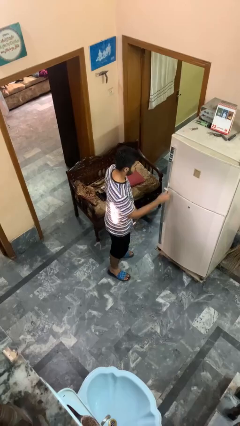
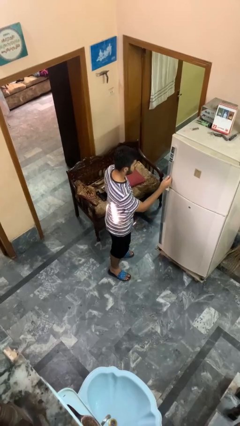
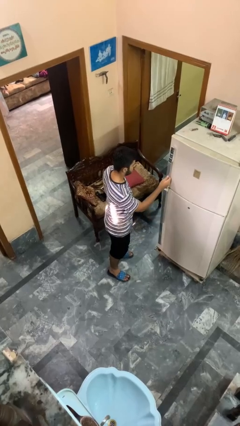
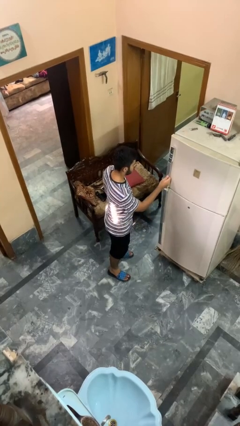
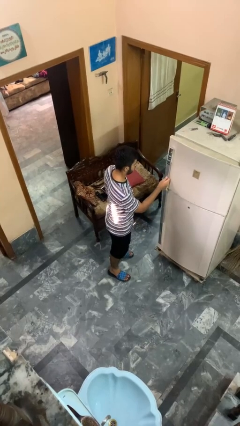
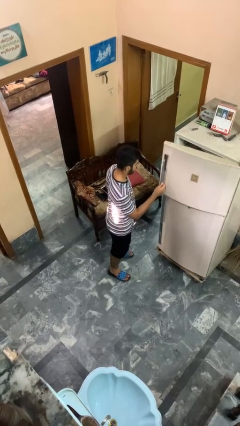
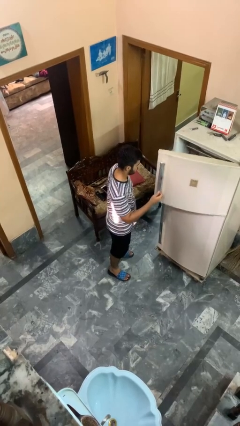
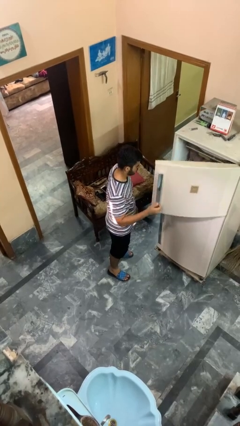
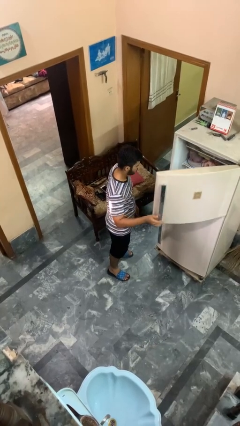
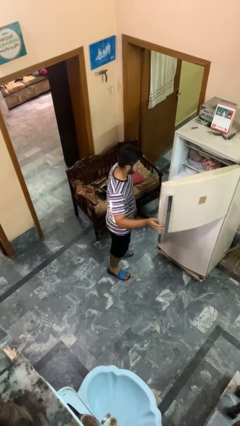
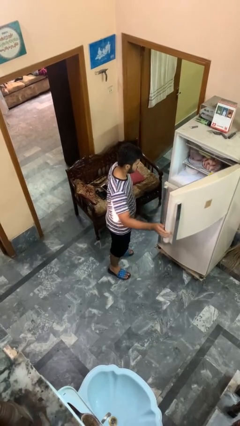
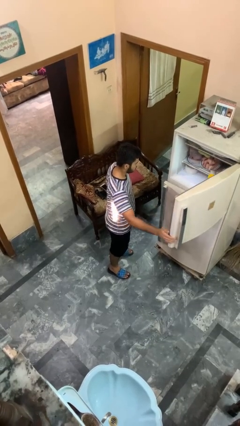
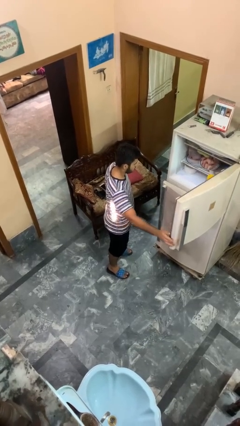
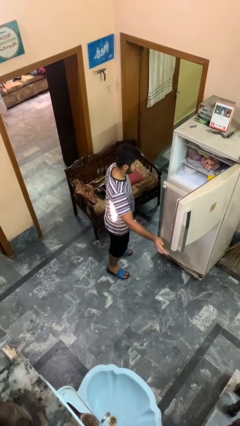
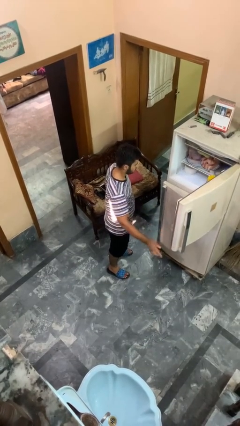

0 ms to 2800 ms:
person opens refrigerator

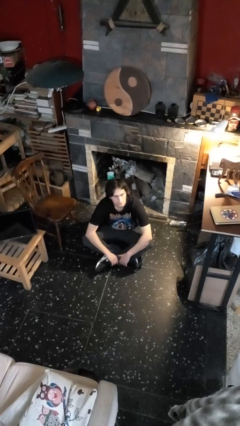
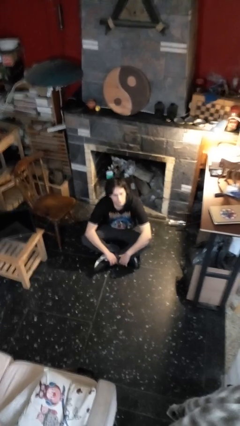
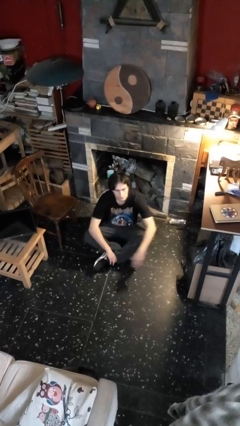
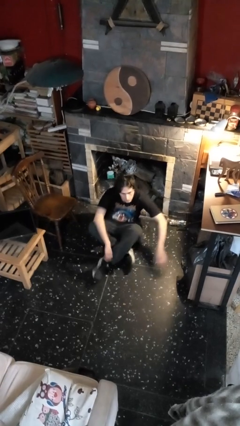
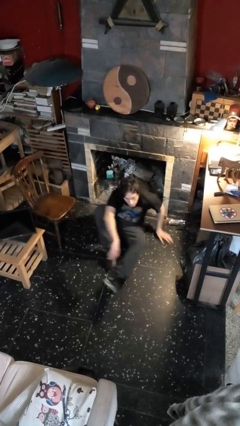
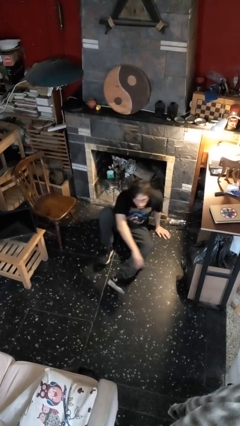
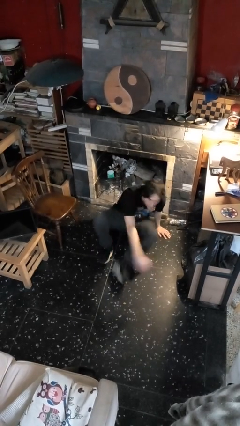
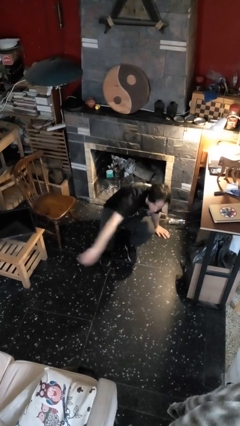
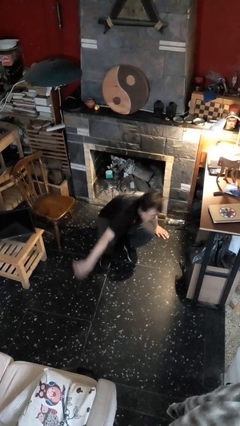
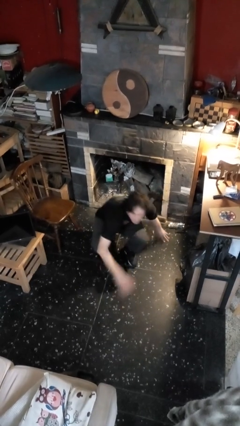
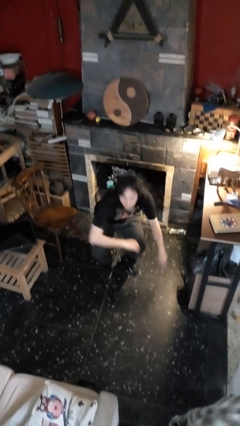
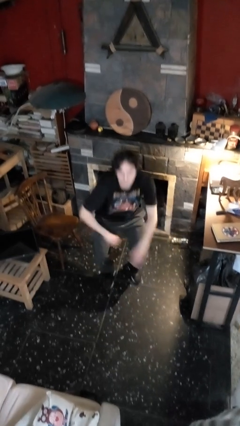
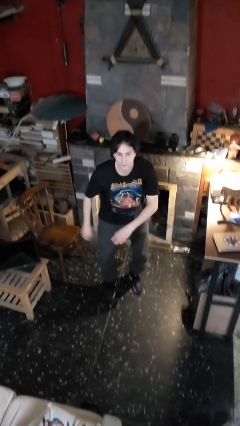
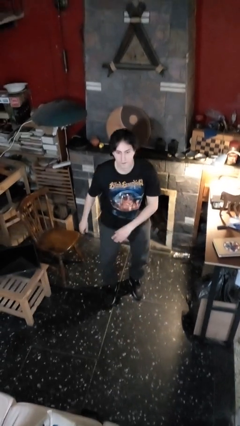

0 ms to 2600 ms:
person stands up from floor

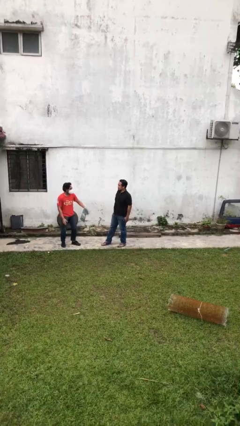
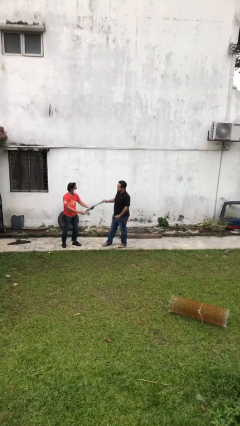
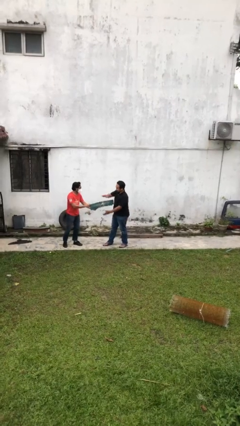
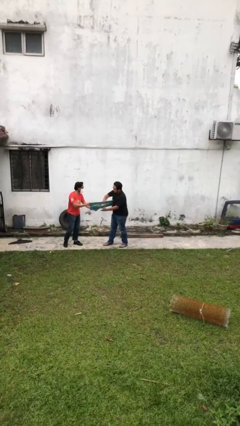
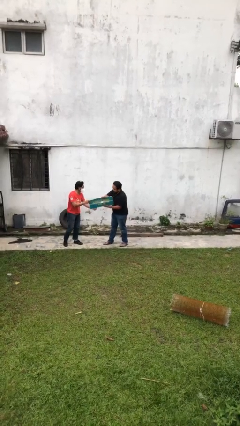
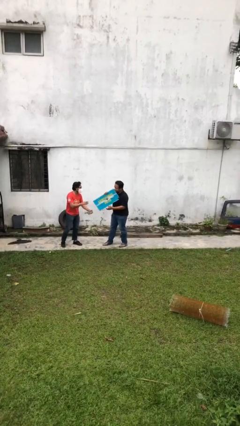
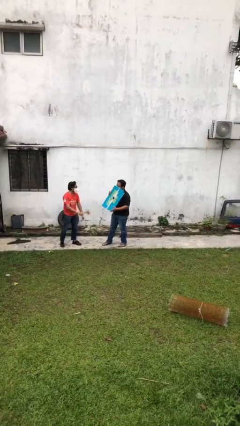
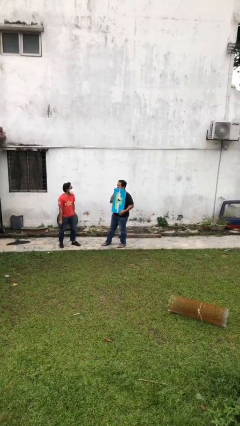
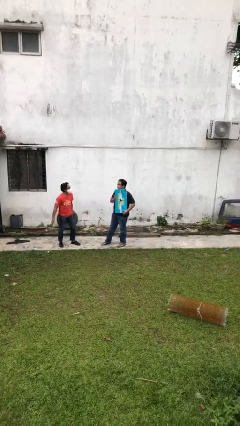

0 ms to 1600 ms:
person transfers object to person

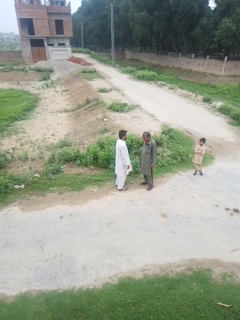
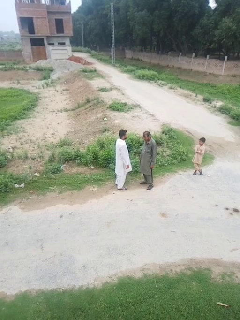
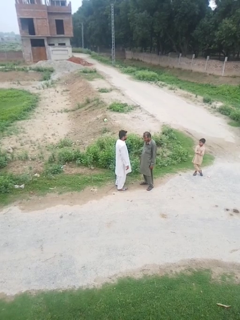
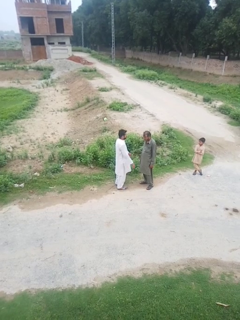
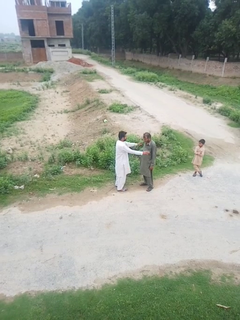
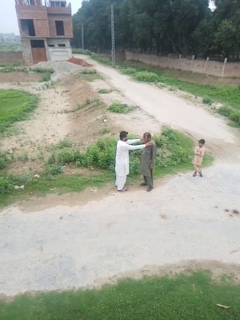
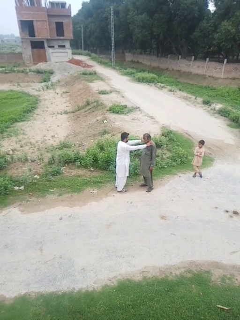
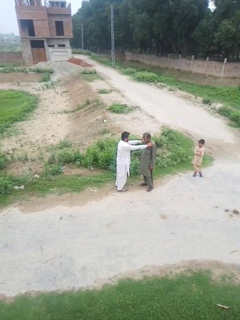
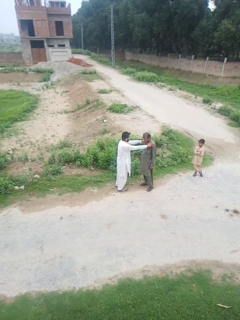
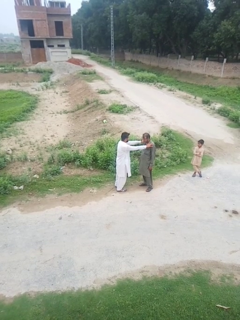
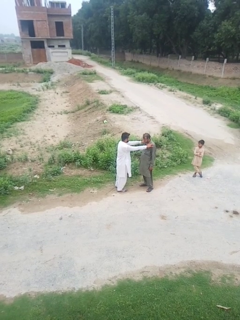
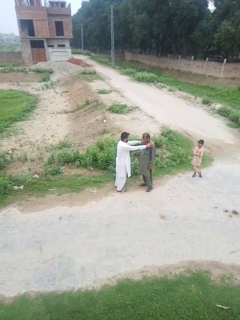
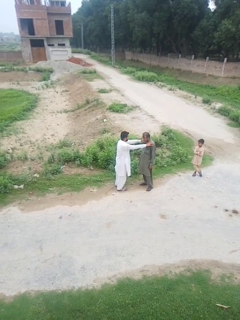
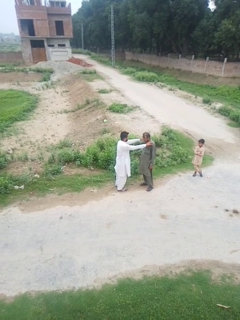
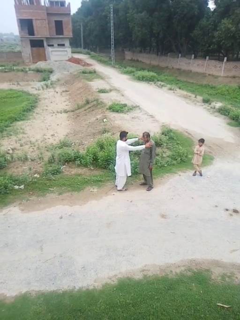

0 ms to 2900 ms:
person pounds shoulders of person

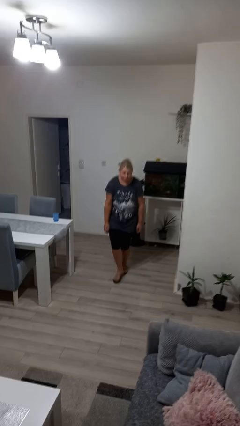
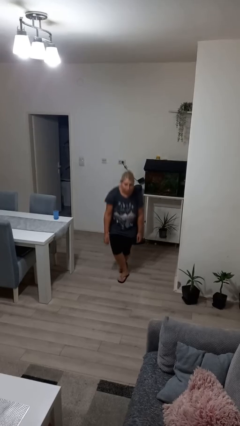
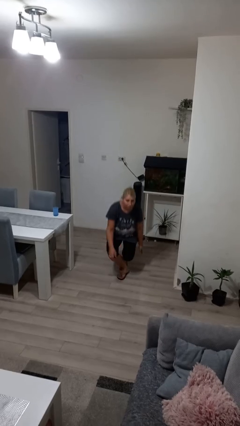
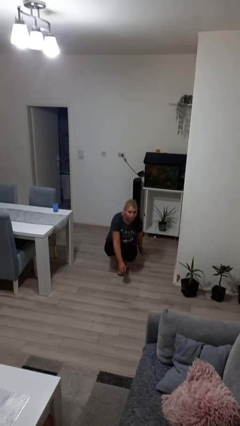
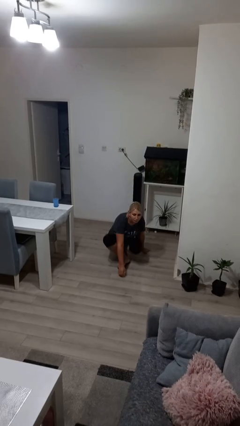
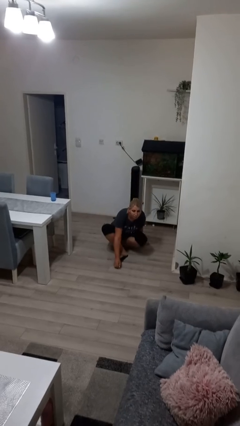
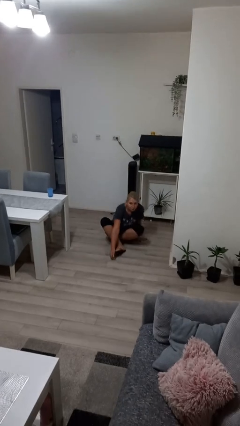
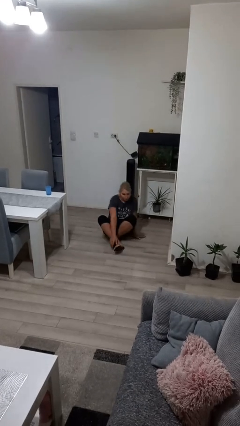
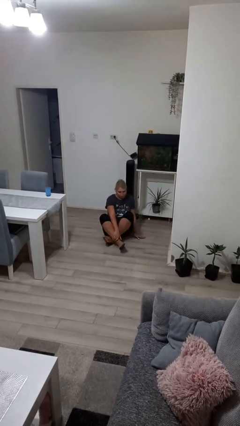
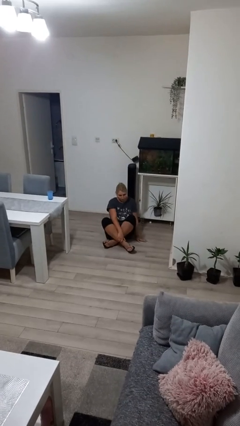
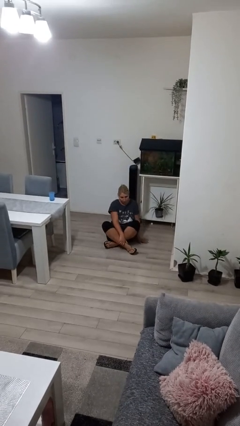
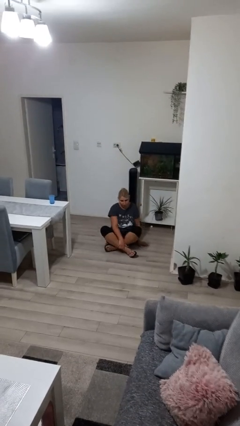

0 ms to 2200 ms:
person sits crisscross

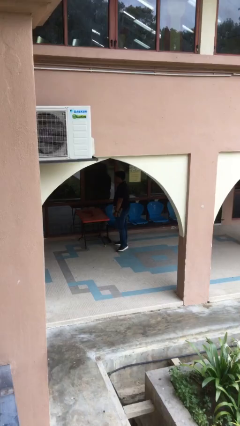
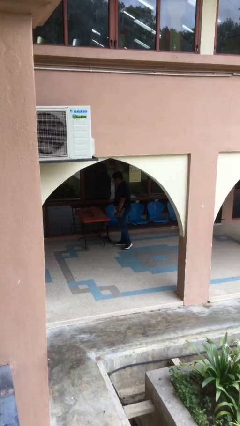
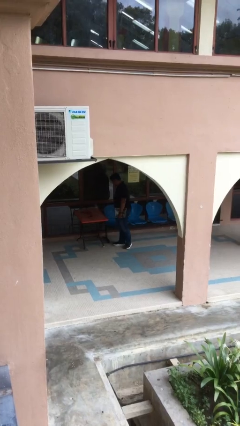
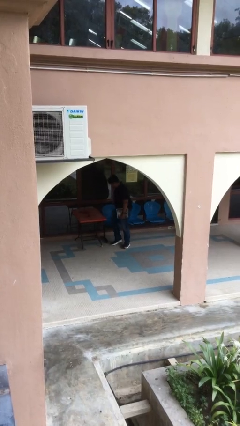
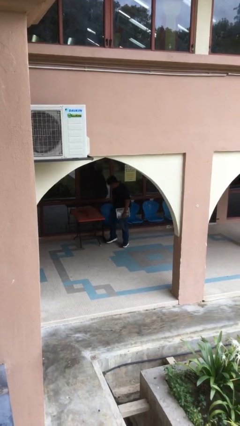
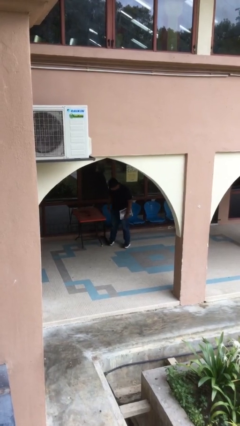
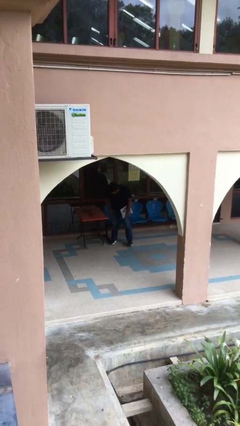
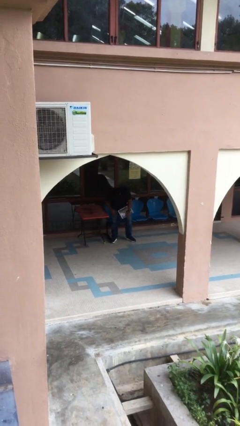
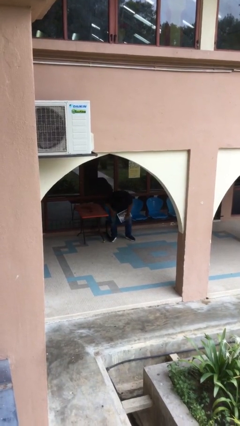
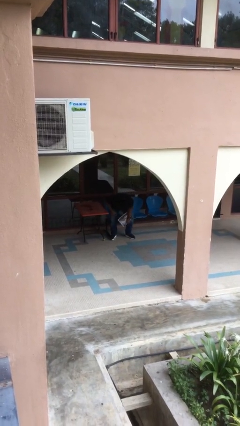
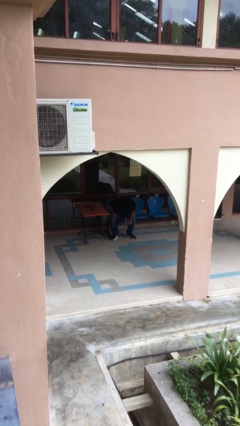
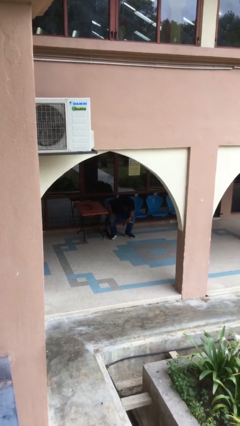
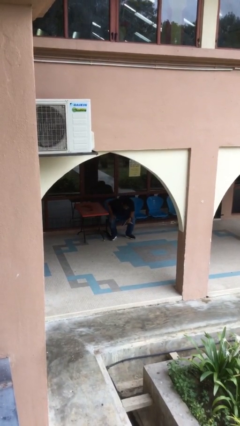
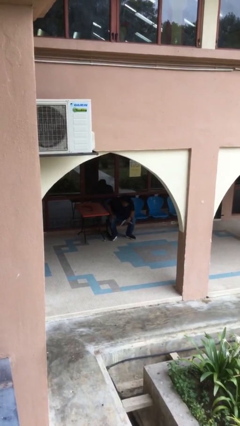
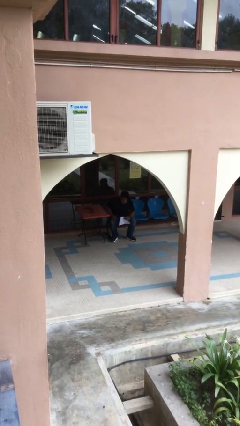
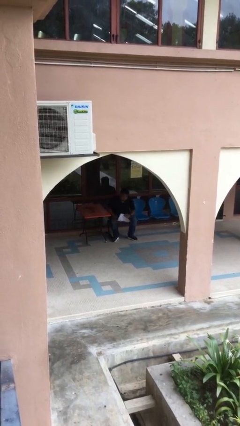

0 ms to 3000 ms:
person sits down

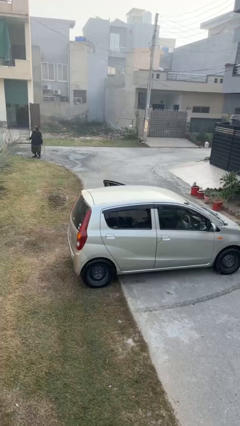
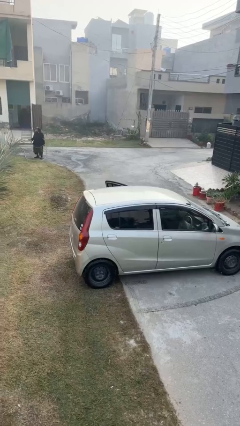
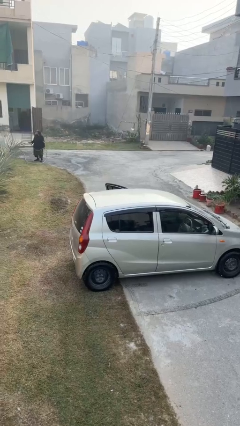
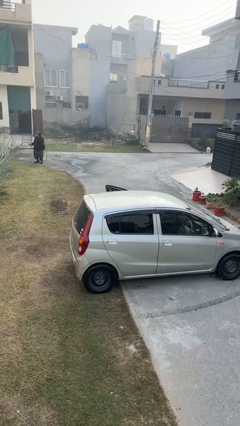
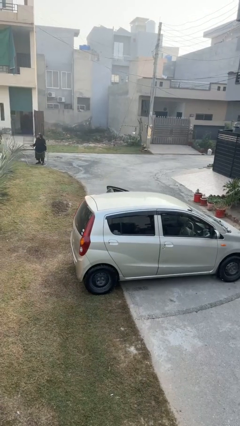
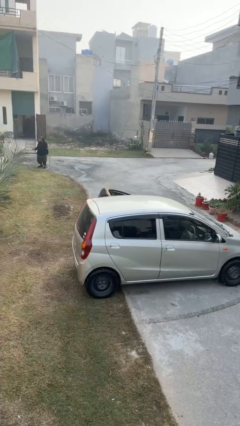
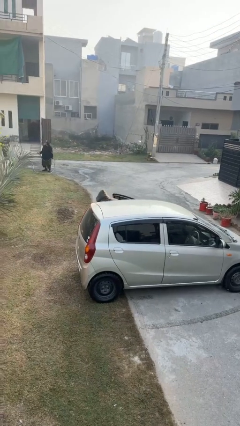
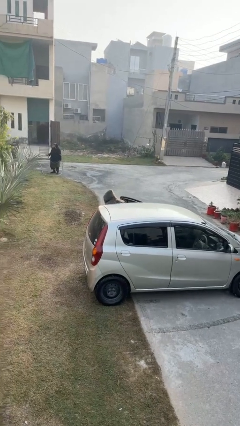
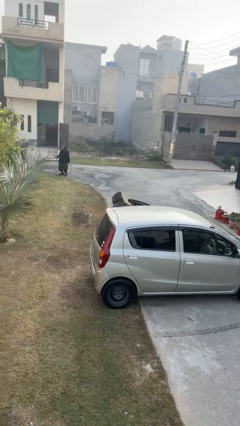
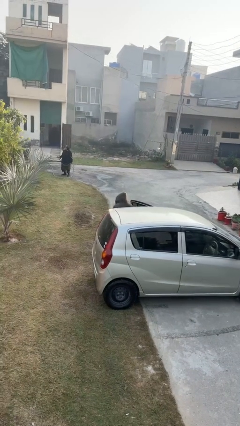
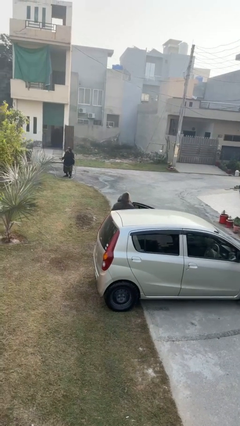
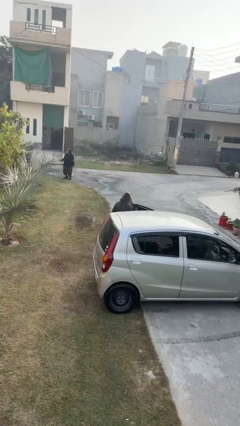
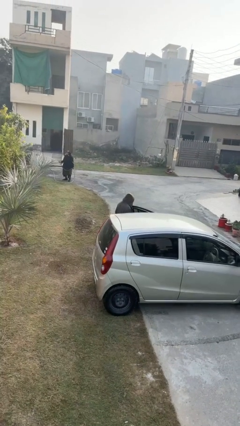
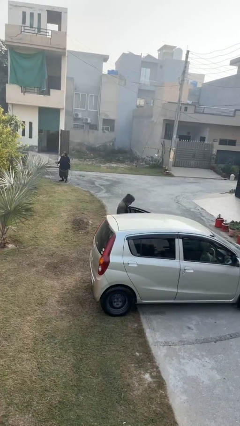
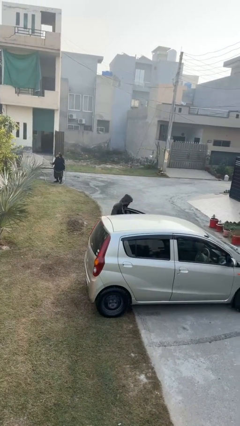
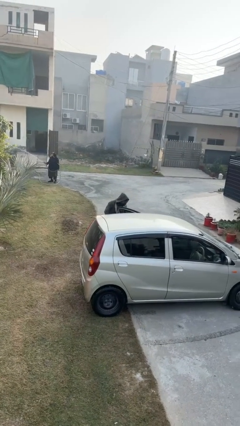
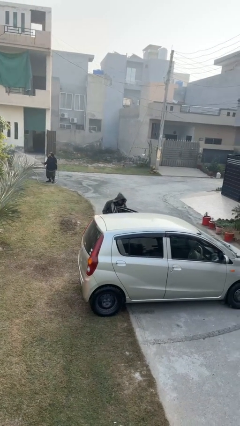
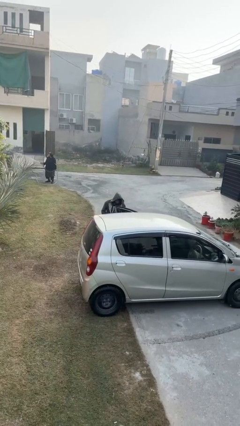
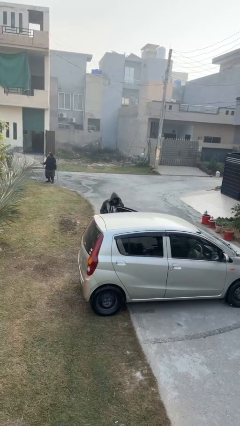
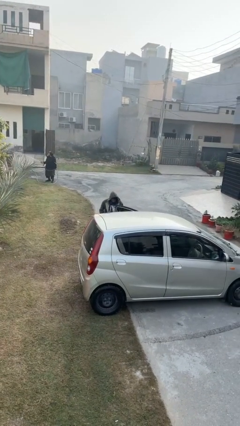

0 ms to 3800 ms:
person exits car
